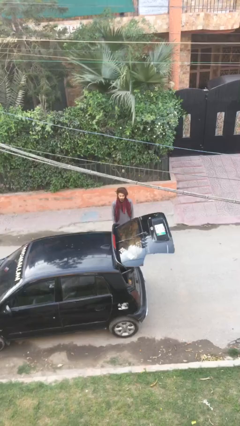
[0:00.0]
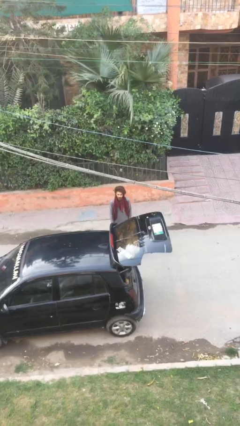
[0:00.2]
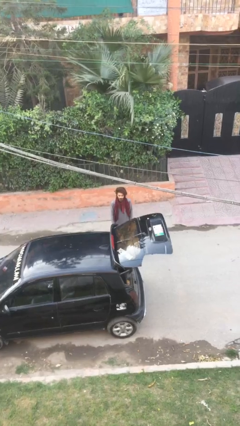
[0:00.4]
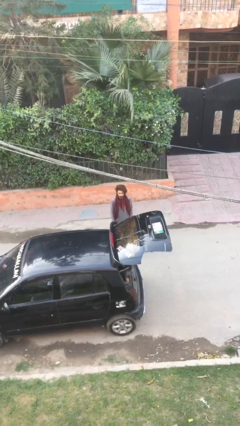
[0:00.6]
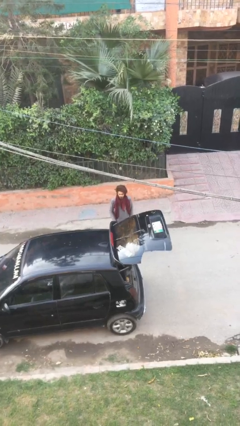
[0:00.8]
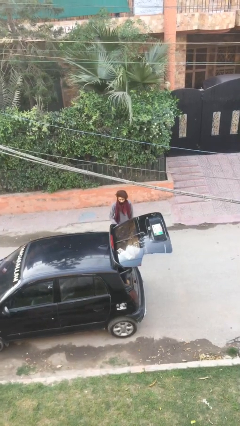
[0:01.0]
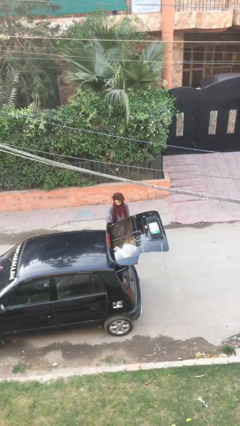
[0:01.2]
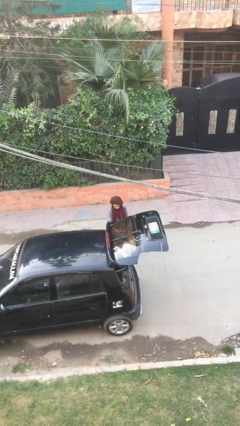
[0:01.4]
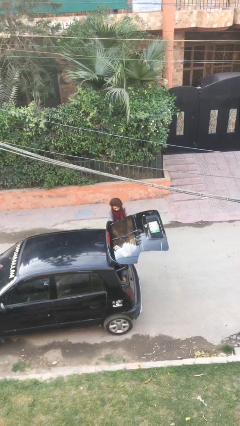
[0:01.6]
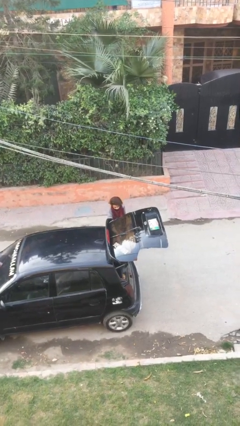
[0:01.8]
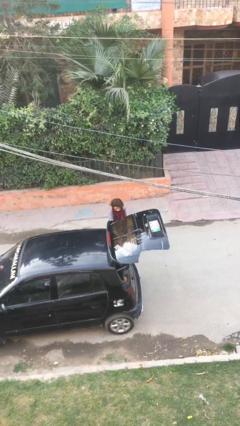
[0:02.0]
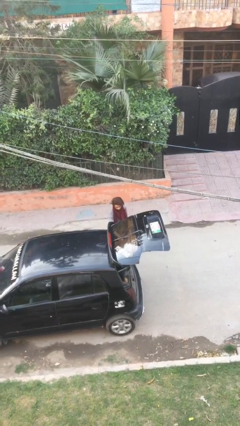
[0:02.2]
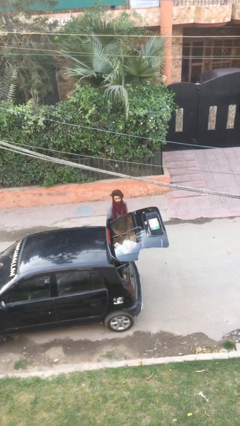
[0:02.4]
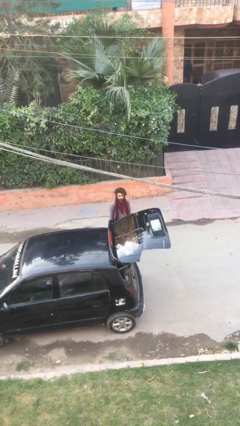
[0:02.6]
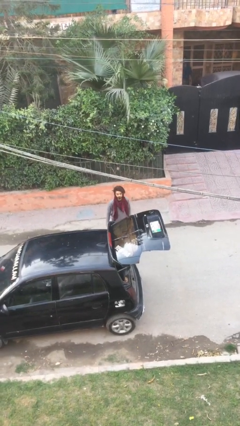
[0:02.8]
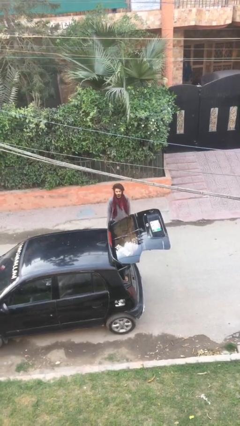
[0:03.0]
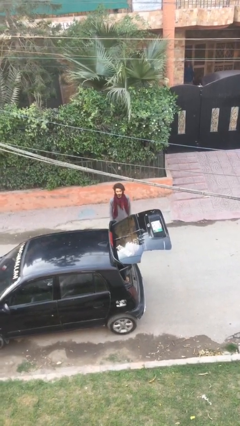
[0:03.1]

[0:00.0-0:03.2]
person loads car

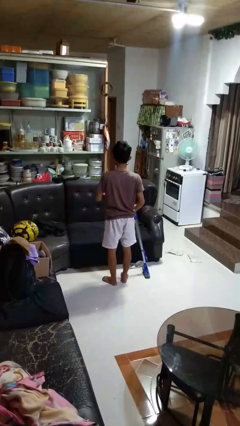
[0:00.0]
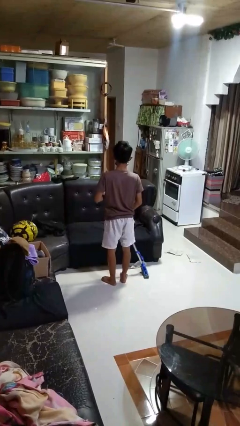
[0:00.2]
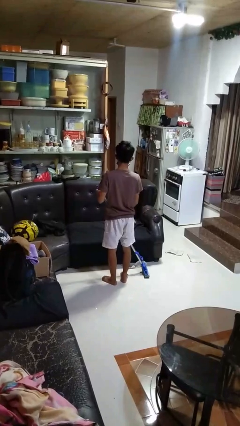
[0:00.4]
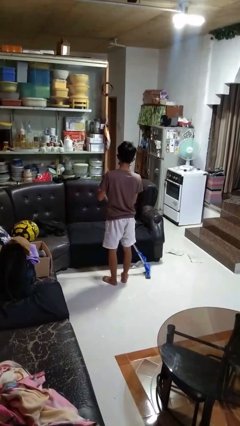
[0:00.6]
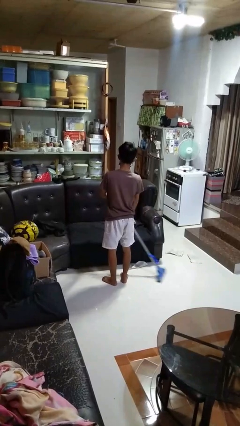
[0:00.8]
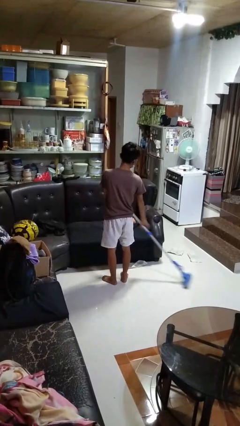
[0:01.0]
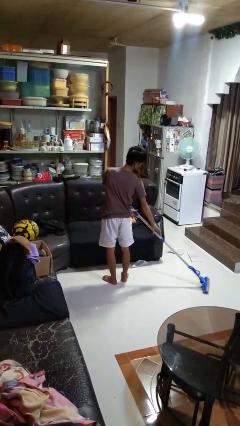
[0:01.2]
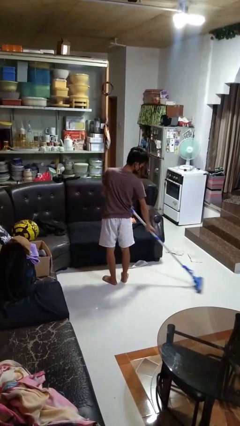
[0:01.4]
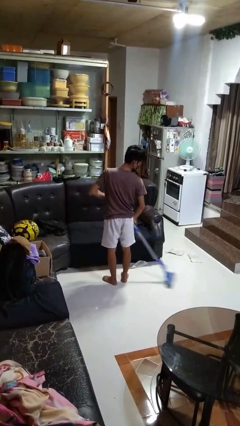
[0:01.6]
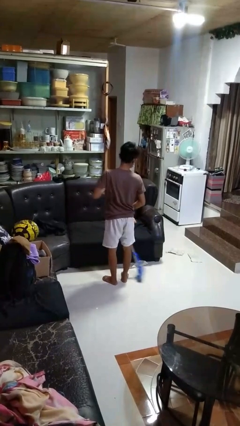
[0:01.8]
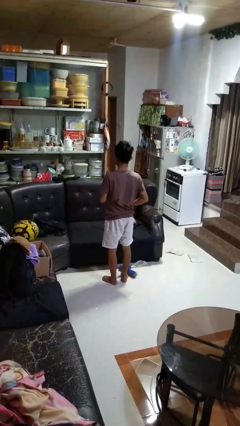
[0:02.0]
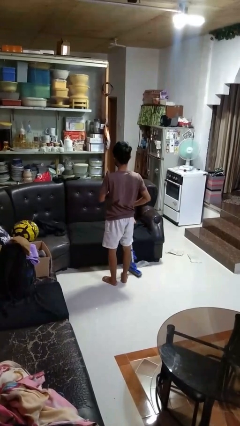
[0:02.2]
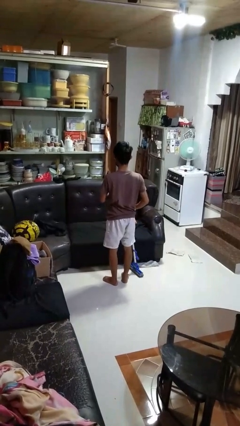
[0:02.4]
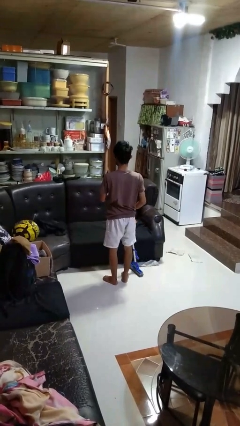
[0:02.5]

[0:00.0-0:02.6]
person mops

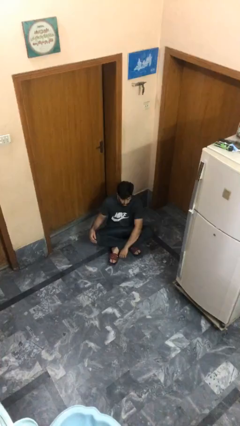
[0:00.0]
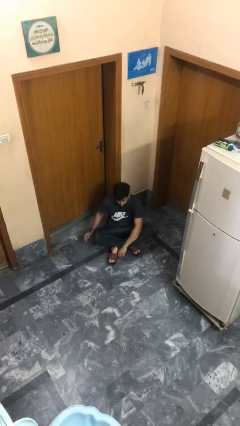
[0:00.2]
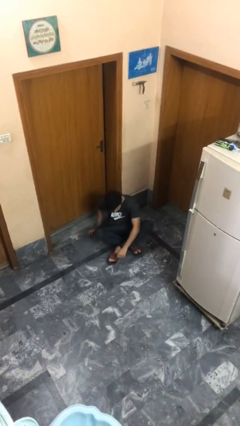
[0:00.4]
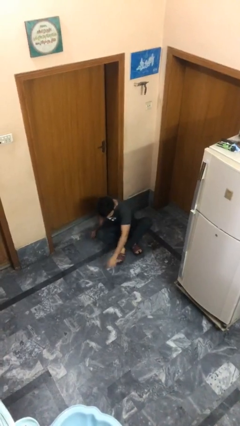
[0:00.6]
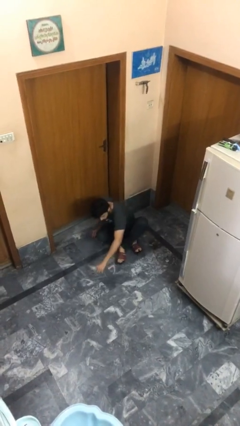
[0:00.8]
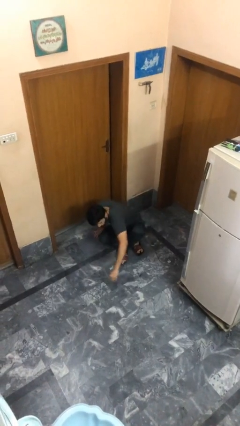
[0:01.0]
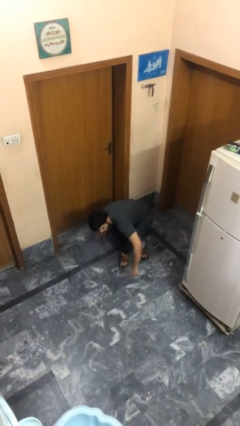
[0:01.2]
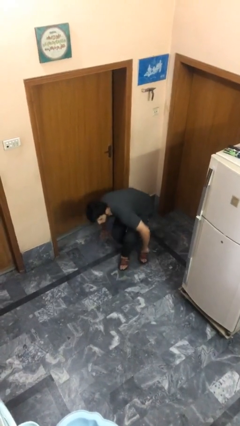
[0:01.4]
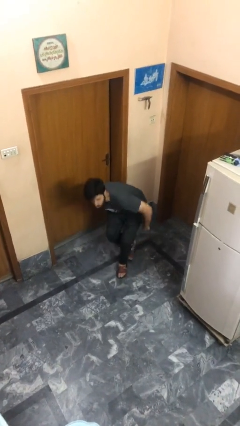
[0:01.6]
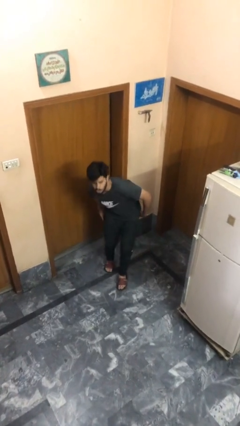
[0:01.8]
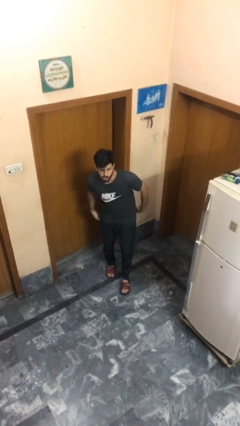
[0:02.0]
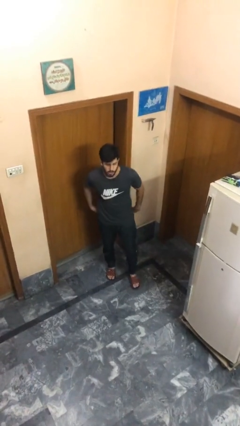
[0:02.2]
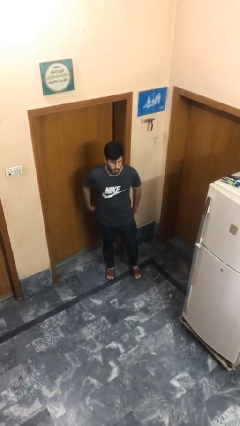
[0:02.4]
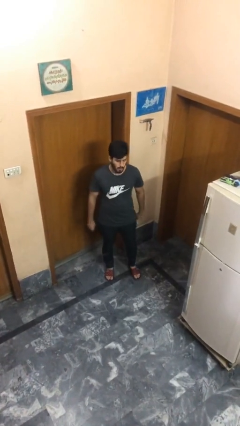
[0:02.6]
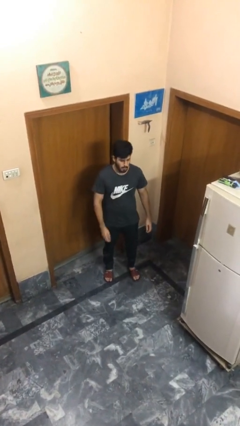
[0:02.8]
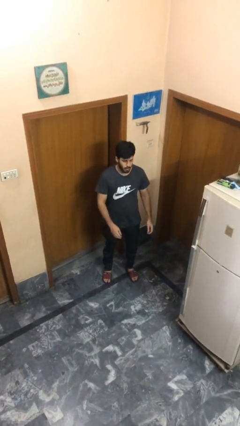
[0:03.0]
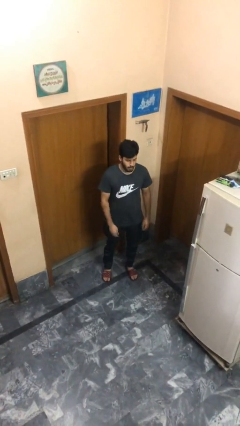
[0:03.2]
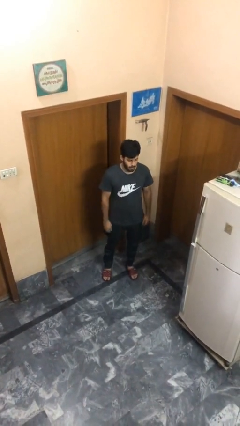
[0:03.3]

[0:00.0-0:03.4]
person stands up from floor

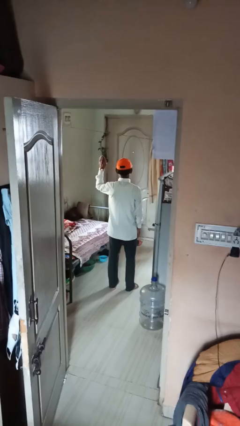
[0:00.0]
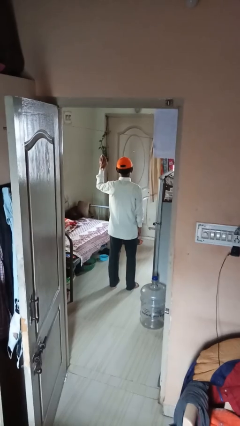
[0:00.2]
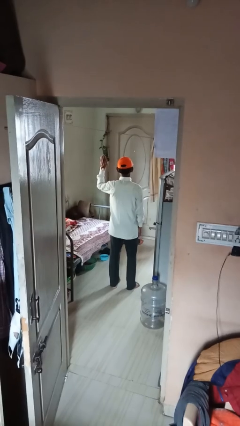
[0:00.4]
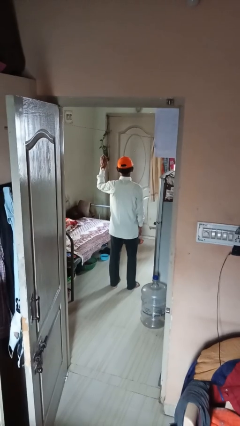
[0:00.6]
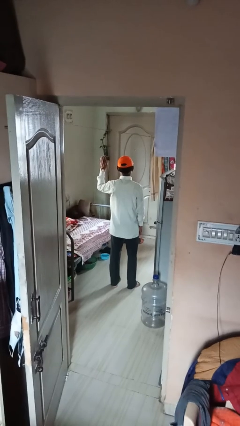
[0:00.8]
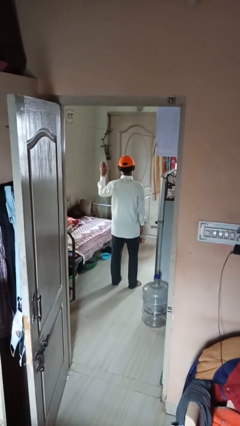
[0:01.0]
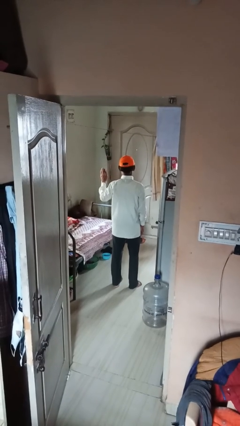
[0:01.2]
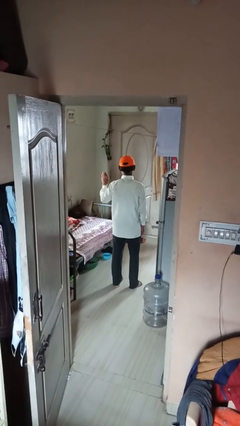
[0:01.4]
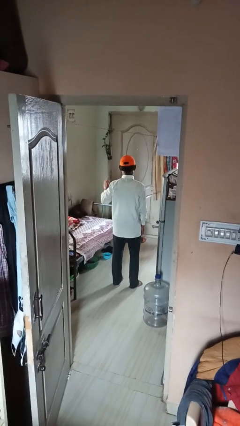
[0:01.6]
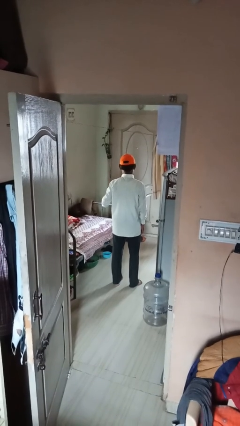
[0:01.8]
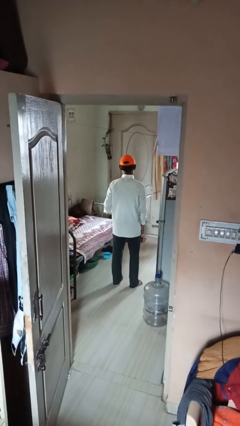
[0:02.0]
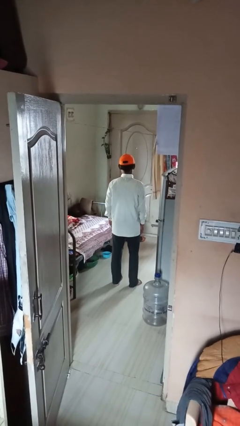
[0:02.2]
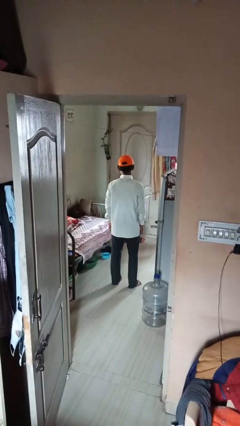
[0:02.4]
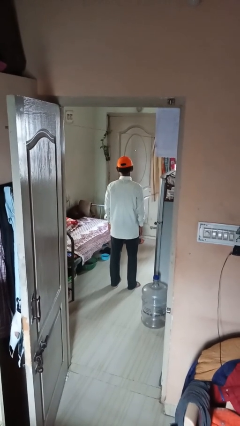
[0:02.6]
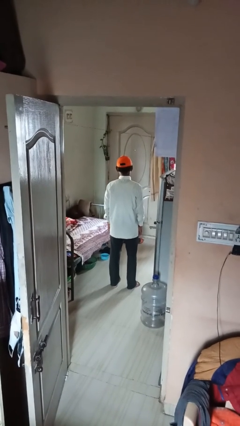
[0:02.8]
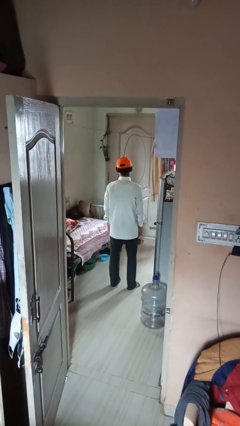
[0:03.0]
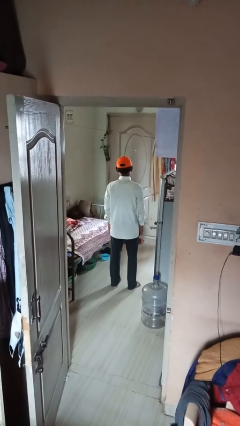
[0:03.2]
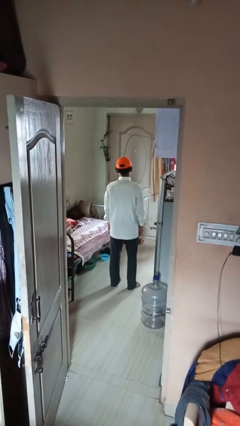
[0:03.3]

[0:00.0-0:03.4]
person gestures lower hand

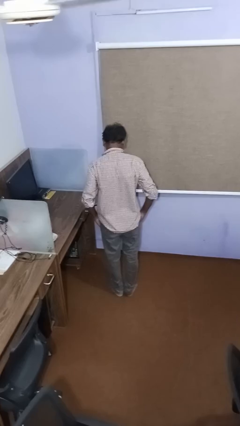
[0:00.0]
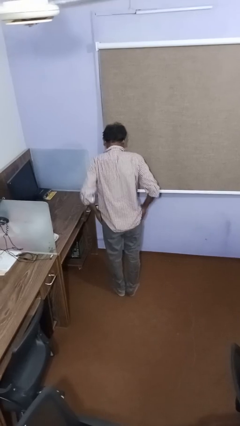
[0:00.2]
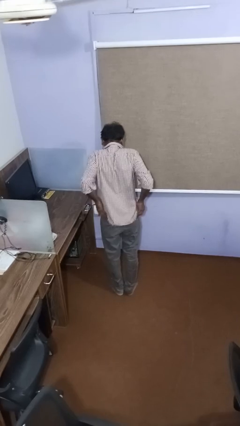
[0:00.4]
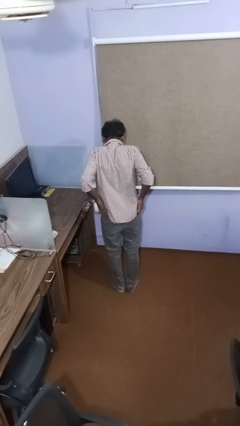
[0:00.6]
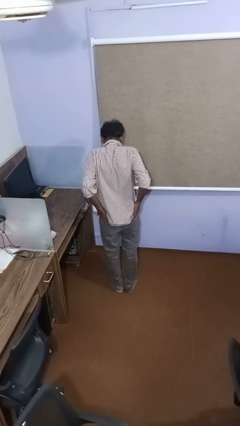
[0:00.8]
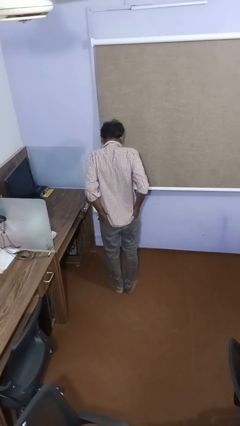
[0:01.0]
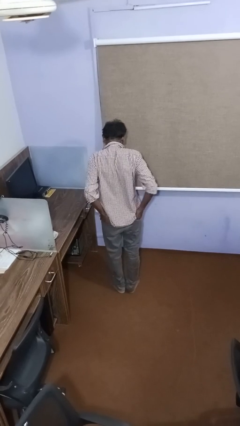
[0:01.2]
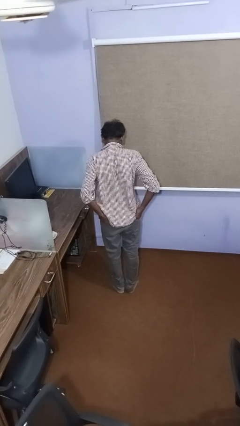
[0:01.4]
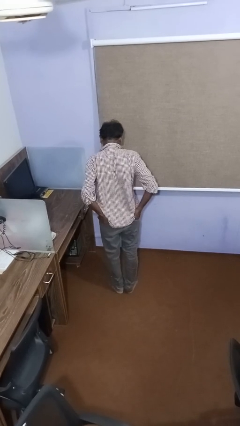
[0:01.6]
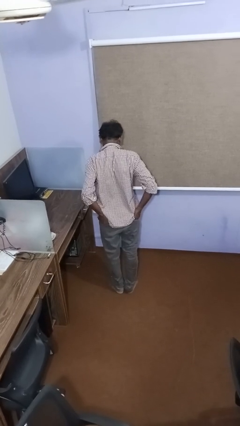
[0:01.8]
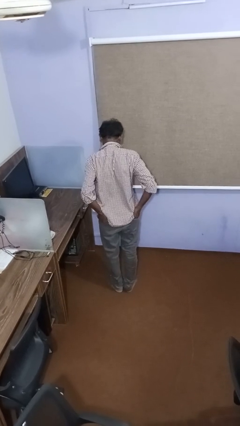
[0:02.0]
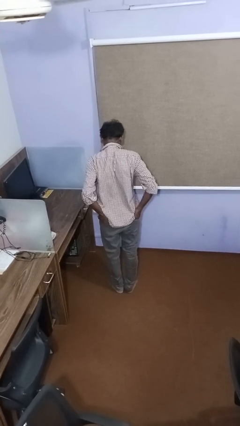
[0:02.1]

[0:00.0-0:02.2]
person puts hands in back pockets

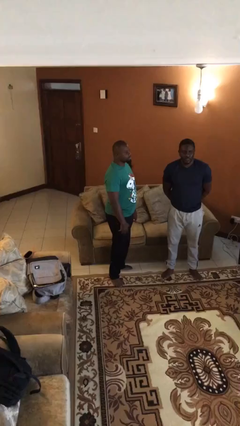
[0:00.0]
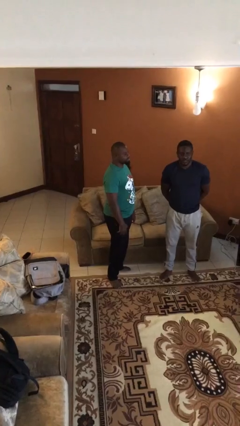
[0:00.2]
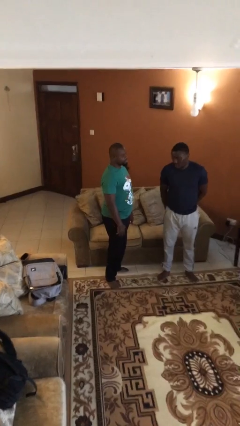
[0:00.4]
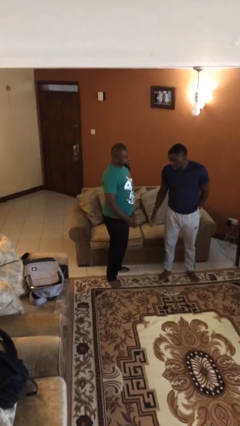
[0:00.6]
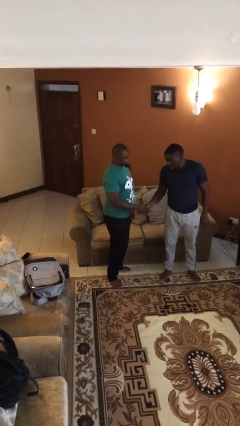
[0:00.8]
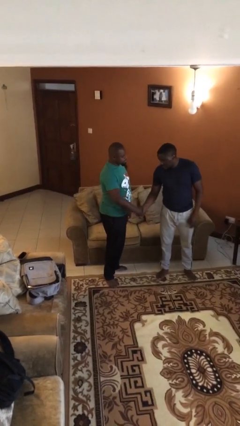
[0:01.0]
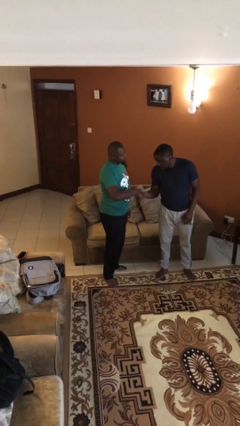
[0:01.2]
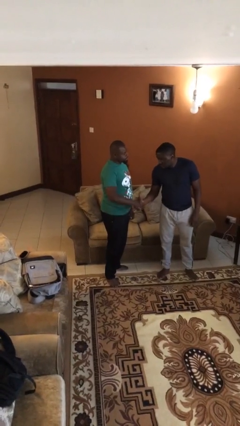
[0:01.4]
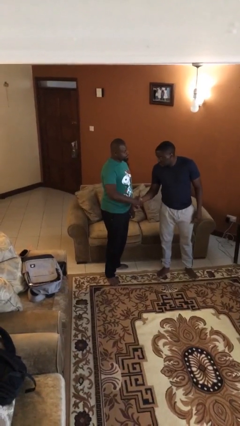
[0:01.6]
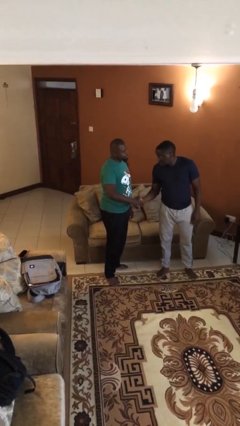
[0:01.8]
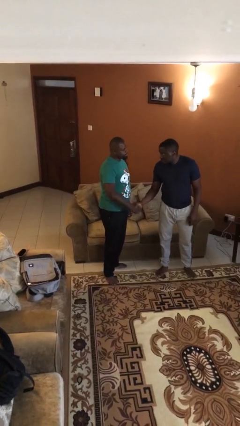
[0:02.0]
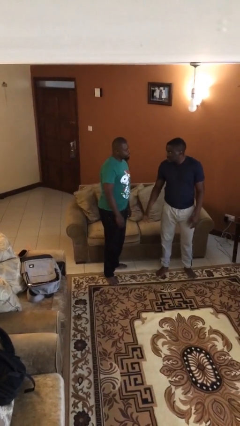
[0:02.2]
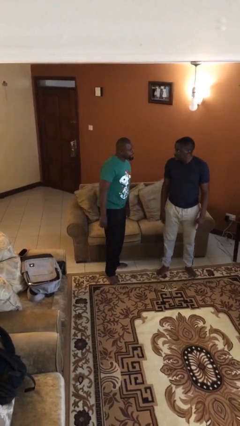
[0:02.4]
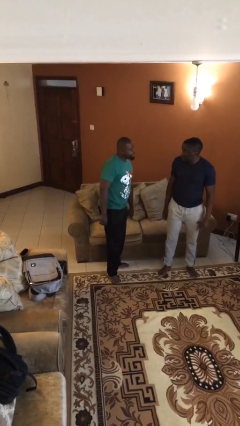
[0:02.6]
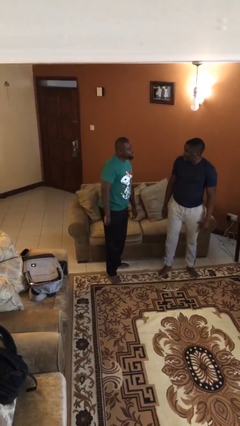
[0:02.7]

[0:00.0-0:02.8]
person shakes hand
